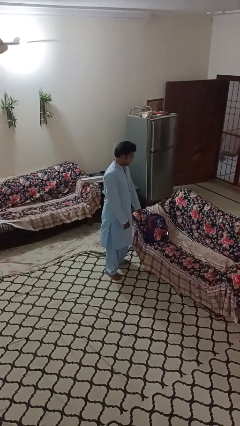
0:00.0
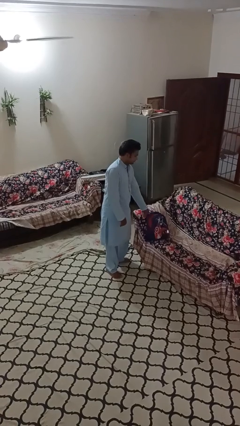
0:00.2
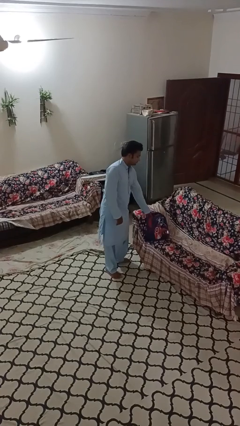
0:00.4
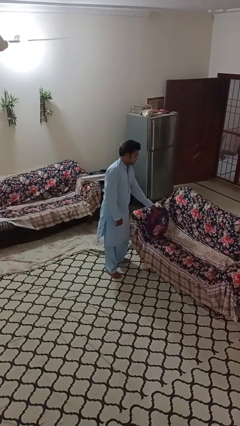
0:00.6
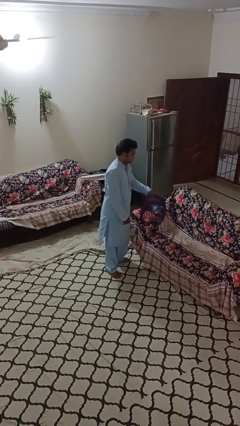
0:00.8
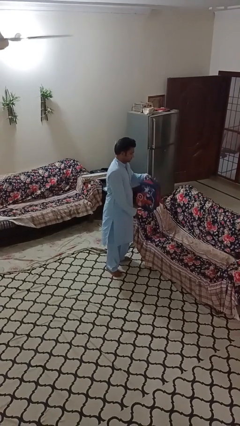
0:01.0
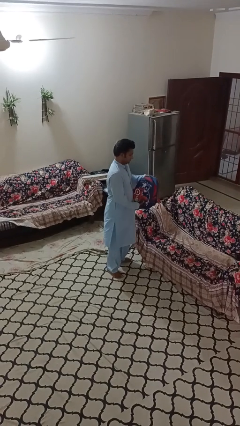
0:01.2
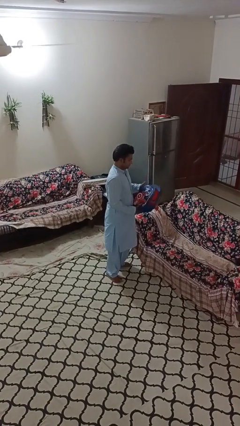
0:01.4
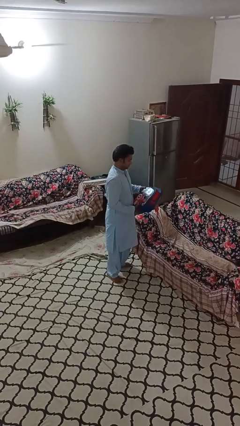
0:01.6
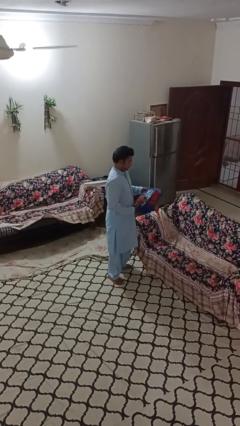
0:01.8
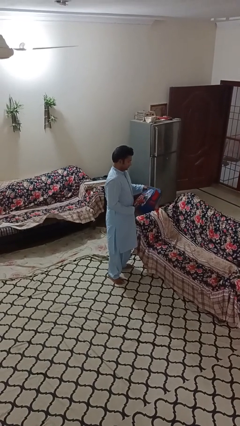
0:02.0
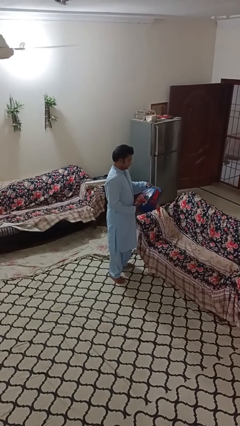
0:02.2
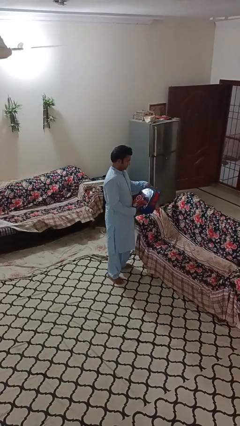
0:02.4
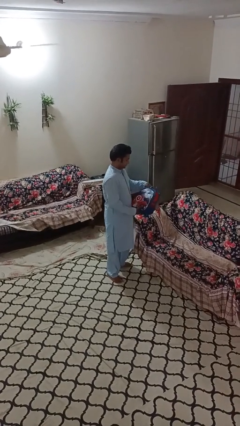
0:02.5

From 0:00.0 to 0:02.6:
person picks up object from couch

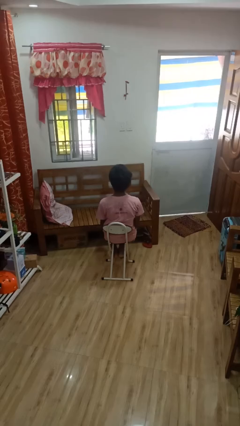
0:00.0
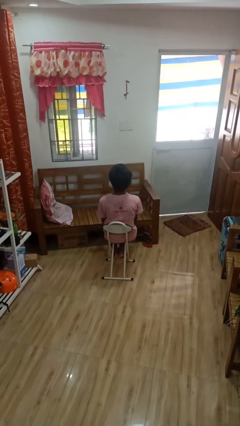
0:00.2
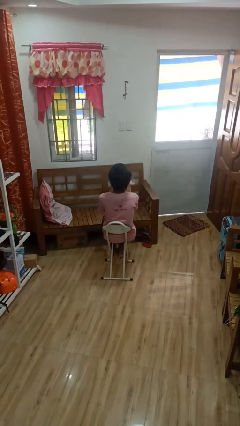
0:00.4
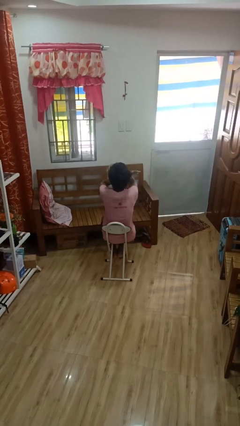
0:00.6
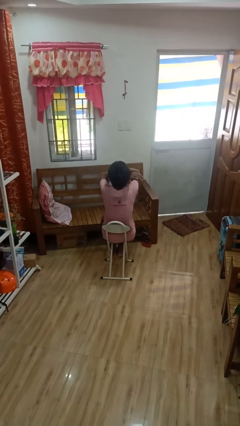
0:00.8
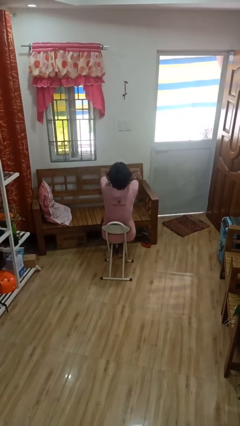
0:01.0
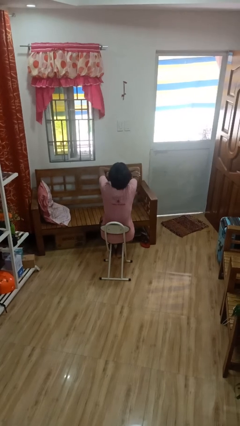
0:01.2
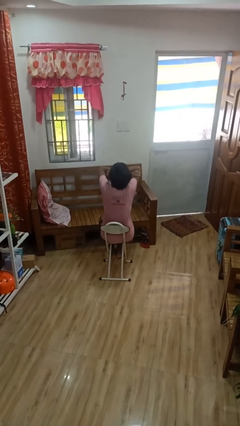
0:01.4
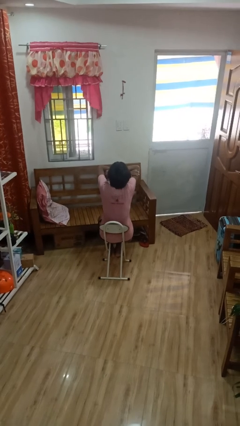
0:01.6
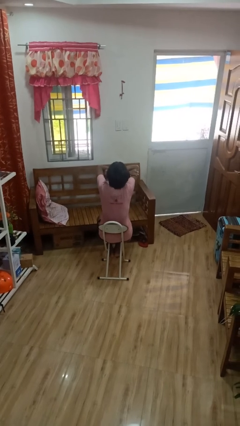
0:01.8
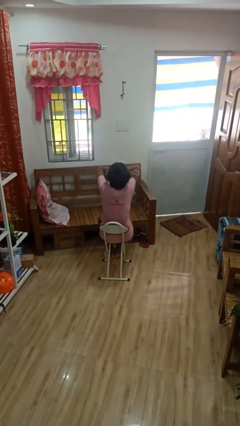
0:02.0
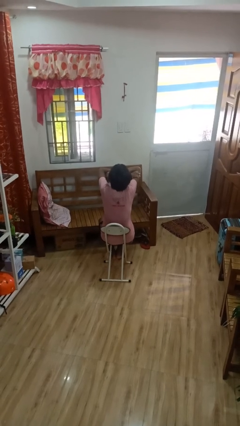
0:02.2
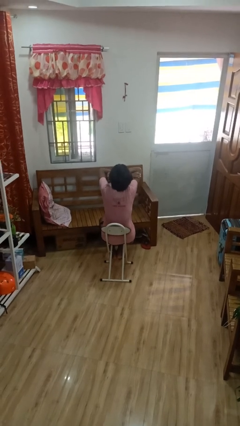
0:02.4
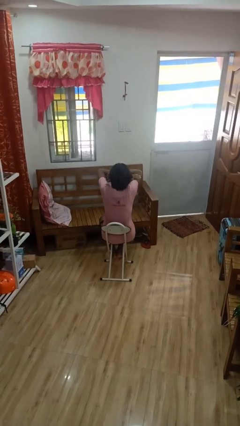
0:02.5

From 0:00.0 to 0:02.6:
person gestures arms x

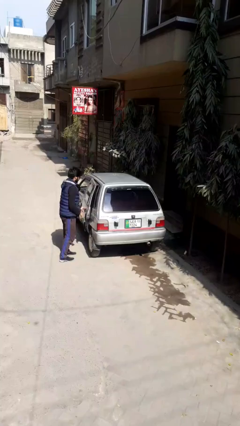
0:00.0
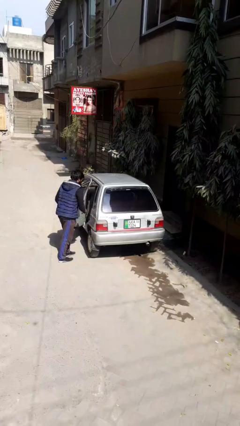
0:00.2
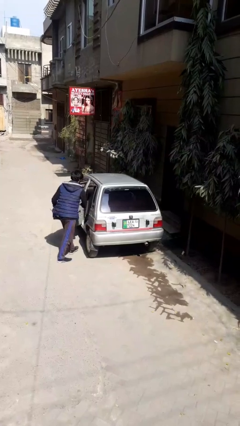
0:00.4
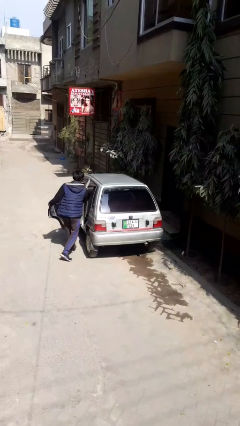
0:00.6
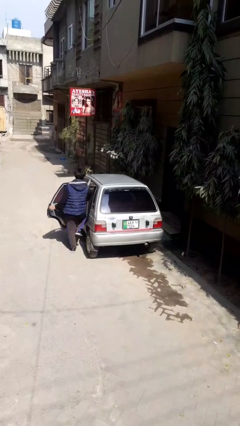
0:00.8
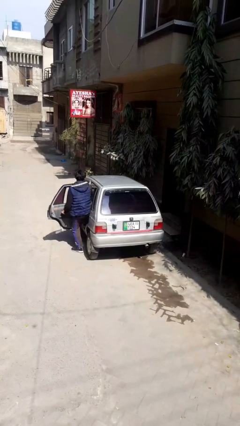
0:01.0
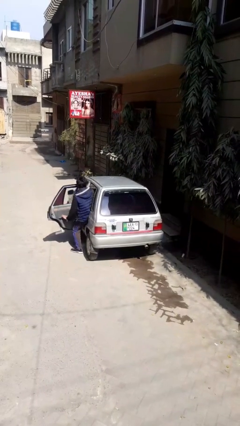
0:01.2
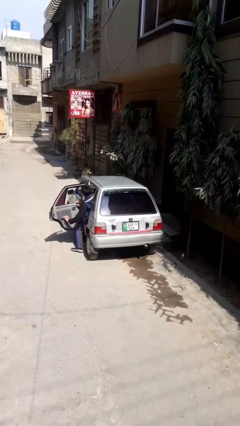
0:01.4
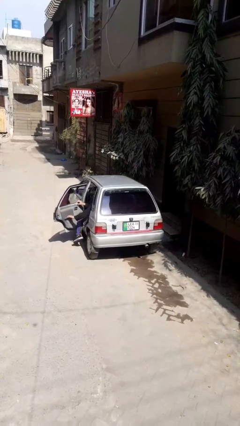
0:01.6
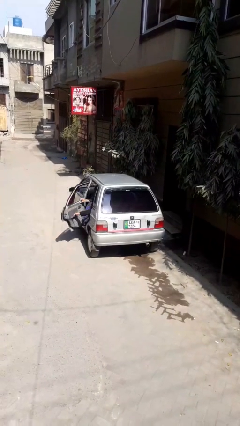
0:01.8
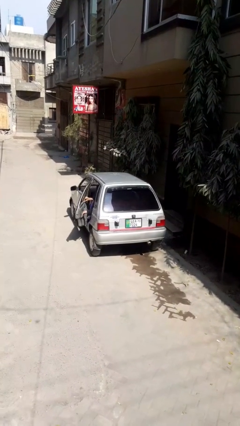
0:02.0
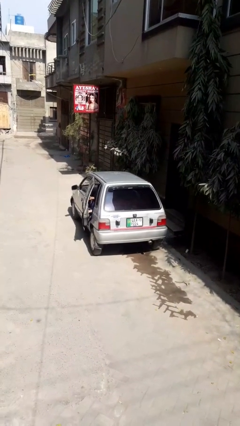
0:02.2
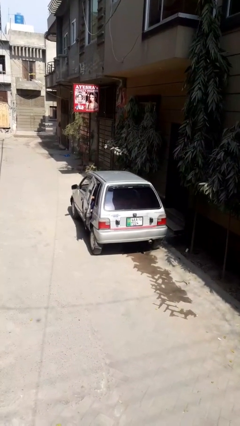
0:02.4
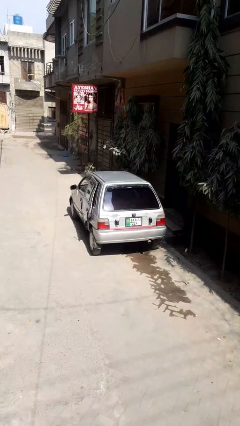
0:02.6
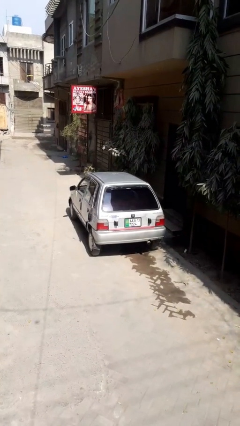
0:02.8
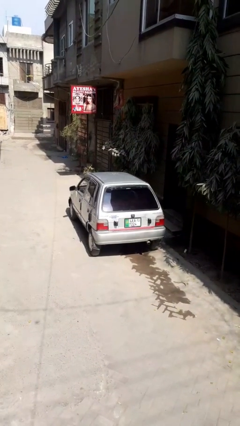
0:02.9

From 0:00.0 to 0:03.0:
car picks up person

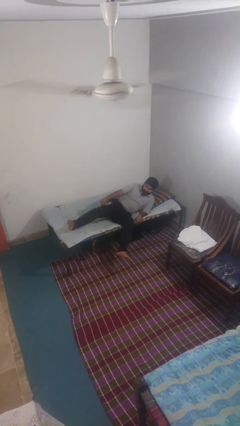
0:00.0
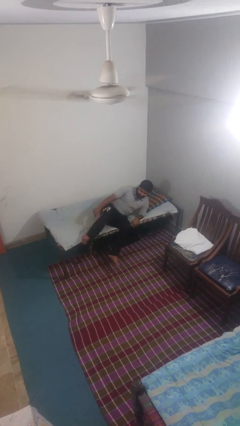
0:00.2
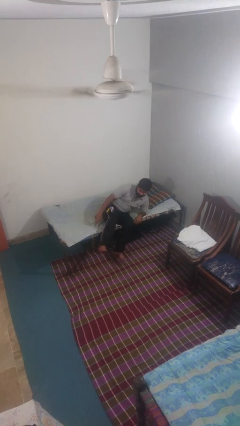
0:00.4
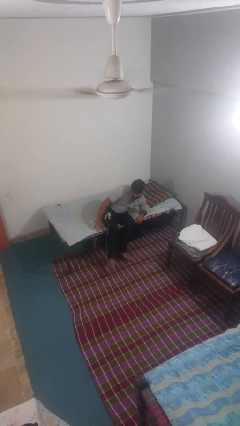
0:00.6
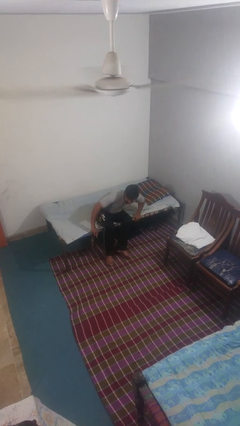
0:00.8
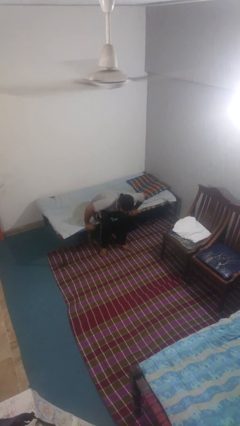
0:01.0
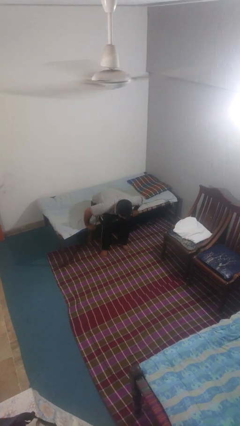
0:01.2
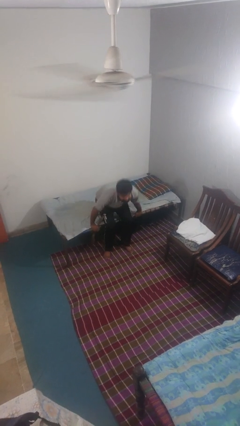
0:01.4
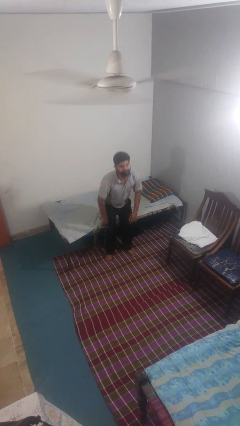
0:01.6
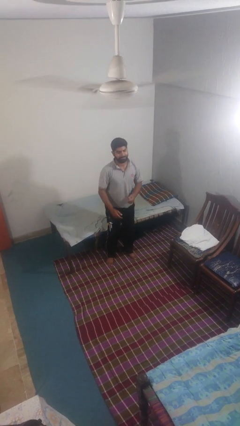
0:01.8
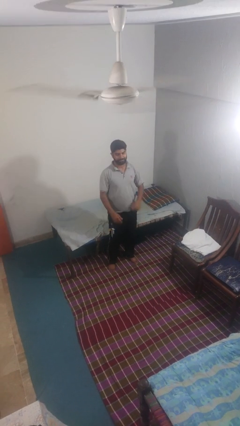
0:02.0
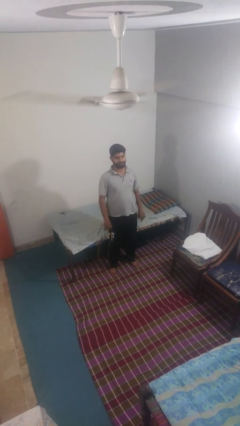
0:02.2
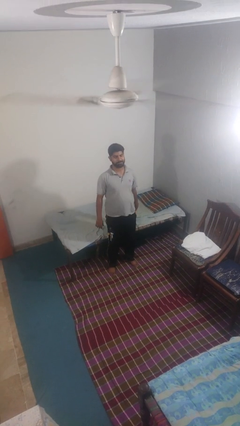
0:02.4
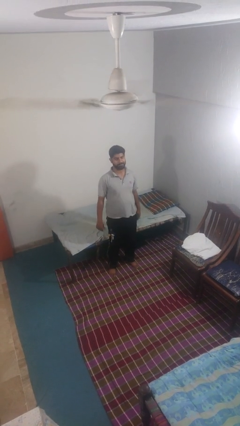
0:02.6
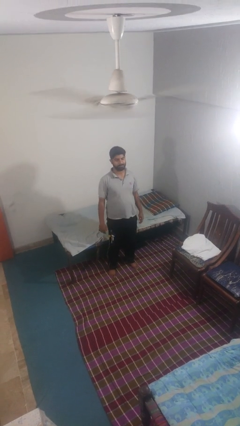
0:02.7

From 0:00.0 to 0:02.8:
person stands up

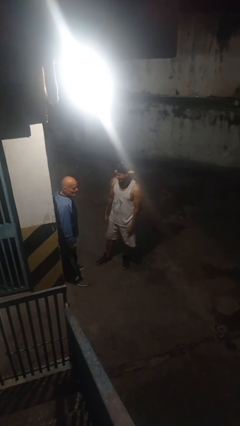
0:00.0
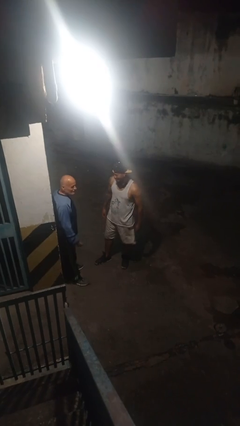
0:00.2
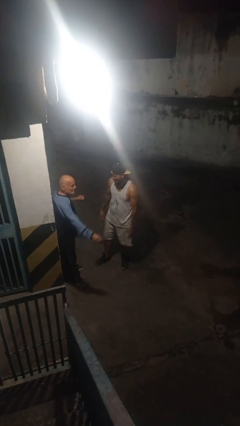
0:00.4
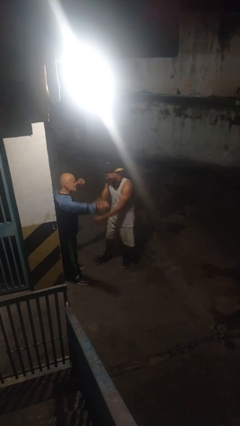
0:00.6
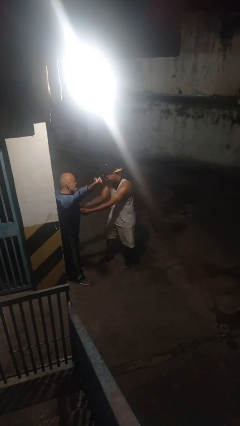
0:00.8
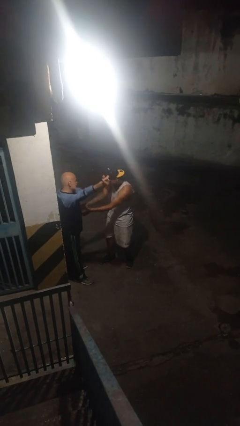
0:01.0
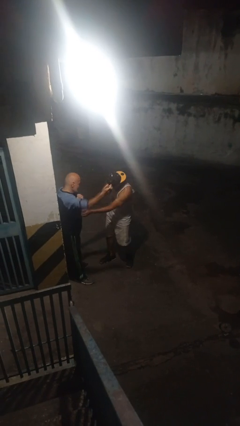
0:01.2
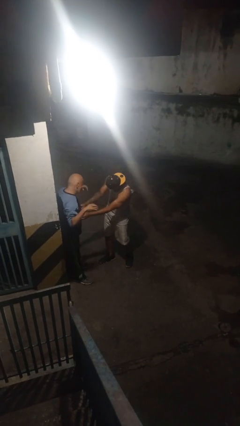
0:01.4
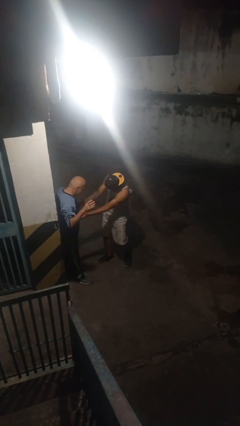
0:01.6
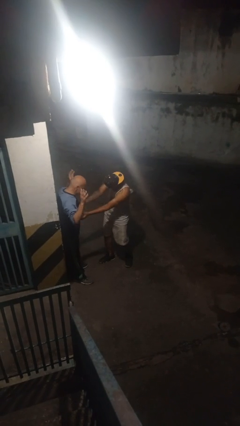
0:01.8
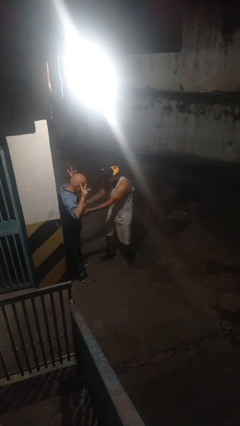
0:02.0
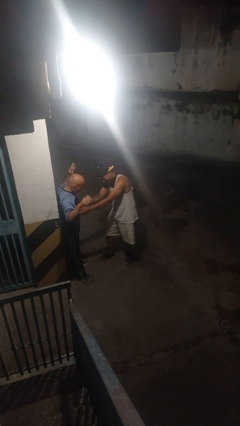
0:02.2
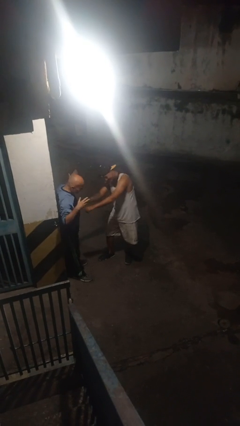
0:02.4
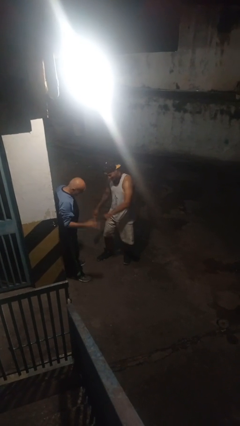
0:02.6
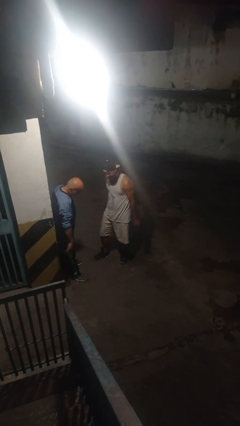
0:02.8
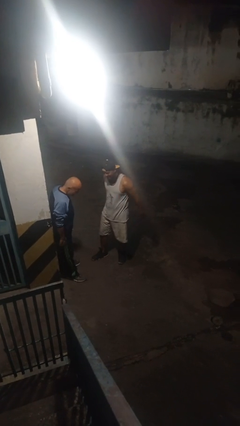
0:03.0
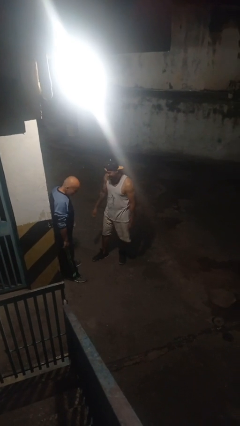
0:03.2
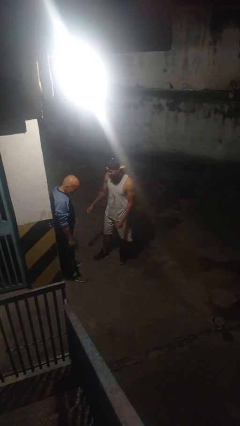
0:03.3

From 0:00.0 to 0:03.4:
person tickles person

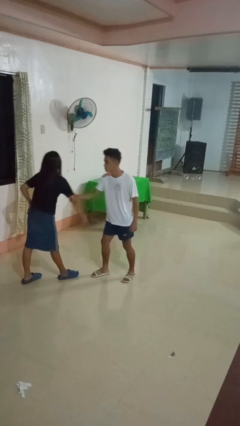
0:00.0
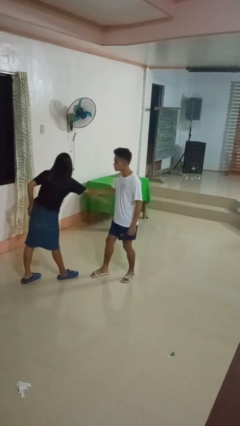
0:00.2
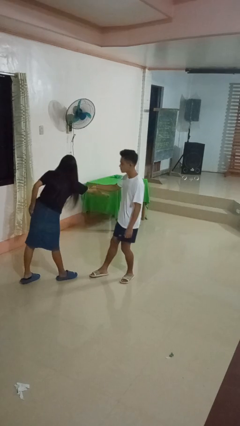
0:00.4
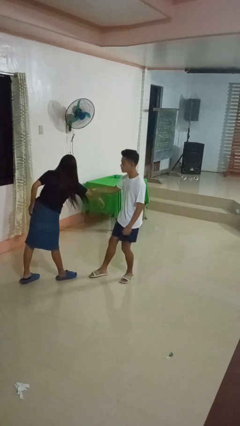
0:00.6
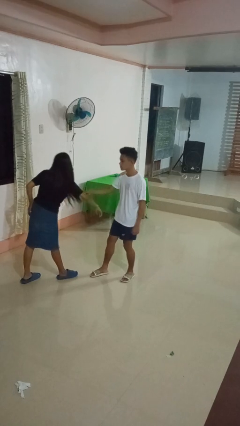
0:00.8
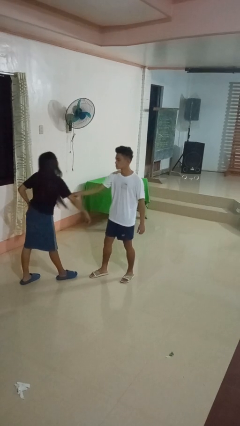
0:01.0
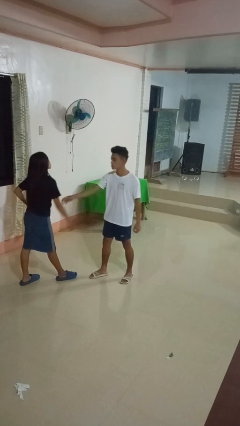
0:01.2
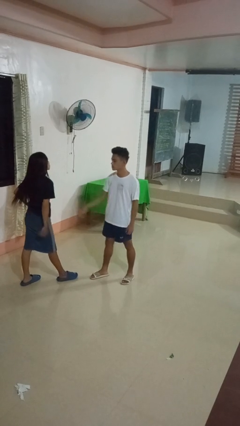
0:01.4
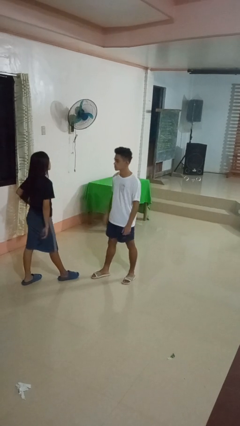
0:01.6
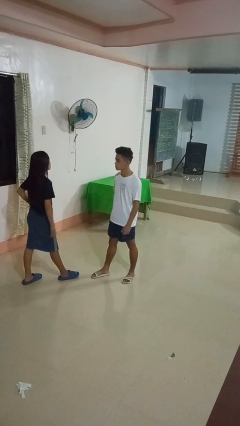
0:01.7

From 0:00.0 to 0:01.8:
person grabs person by bicep

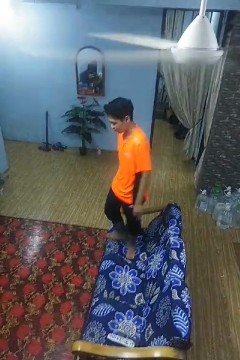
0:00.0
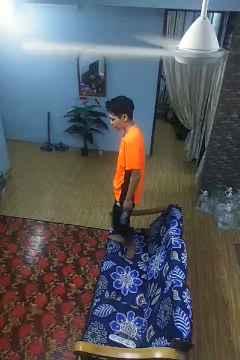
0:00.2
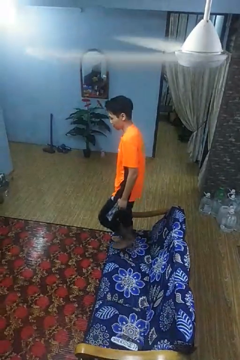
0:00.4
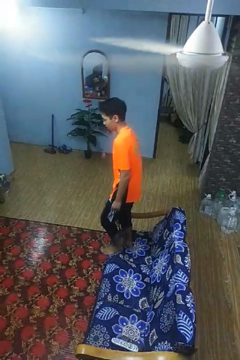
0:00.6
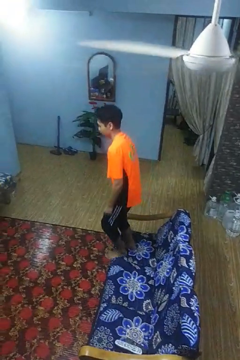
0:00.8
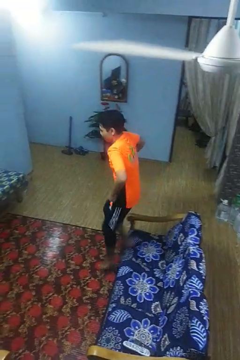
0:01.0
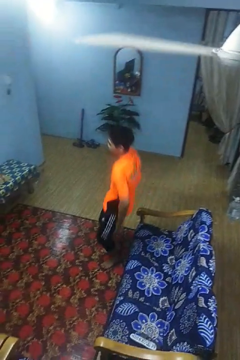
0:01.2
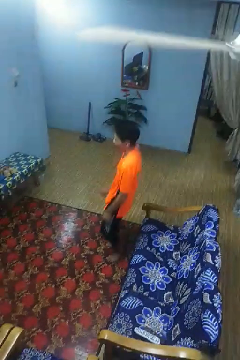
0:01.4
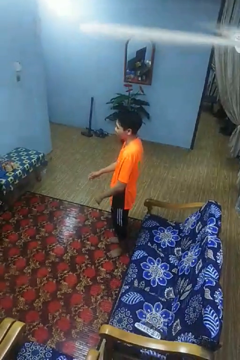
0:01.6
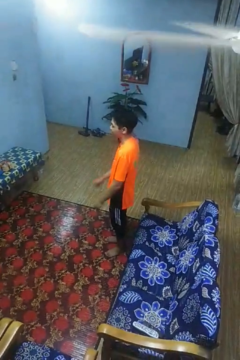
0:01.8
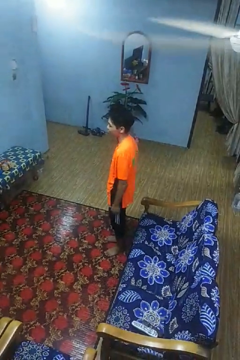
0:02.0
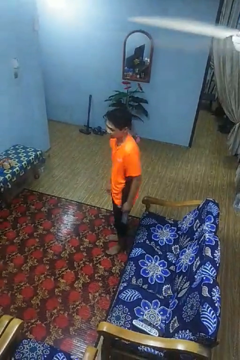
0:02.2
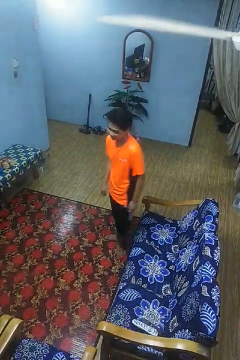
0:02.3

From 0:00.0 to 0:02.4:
person jumps on couch
